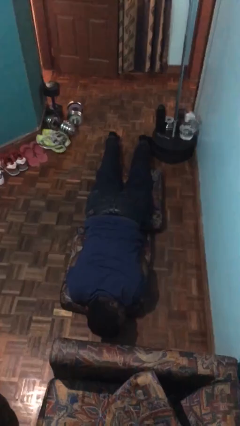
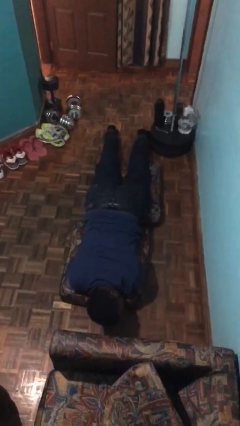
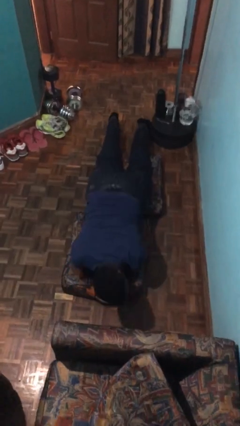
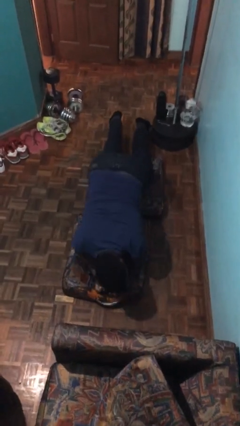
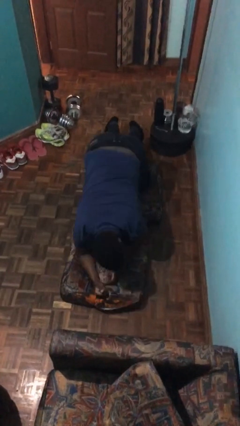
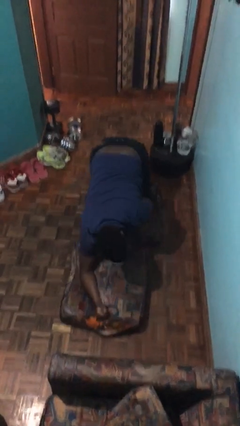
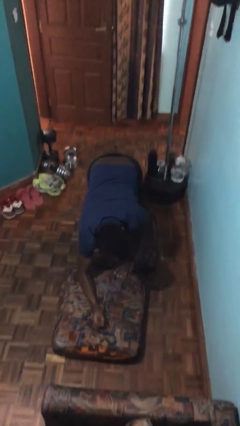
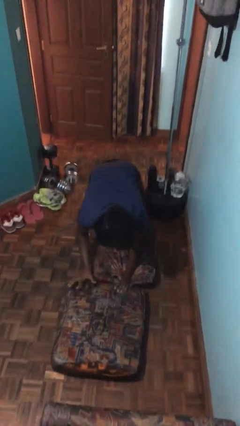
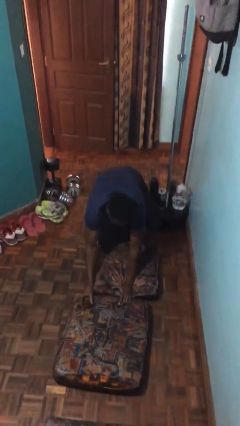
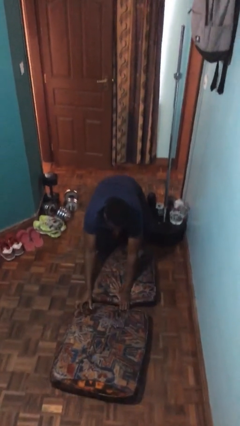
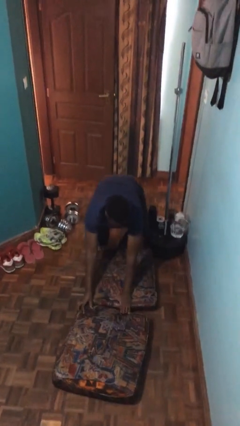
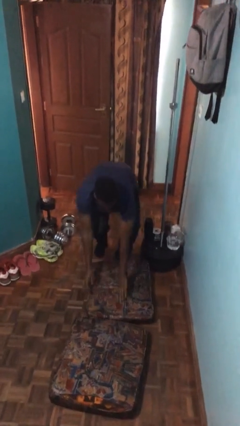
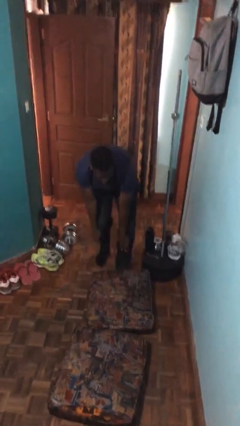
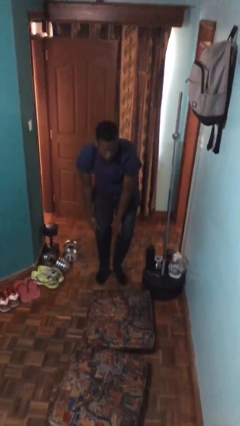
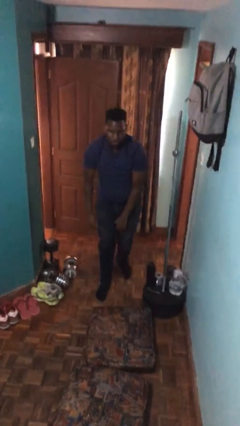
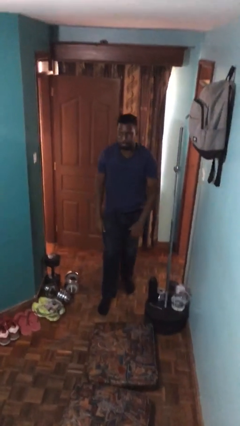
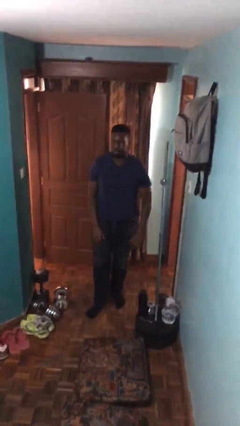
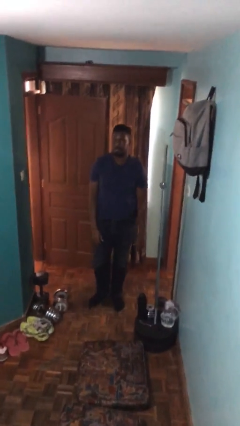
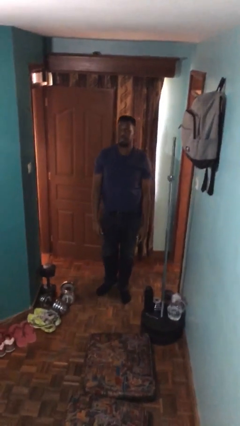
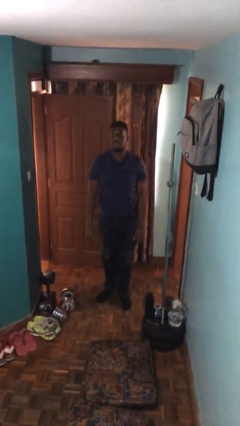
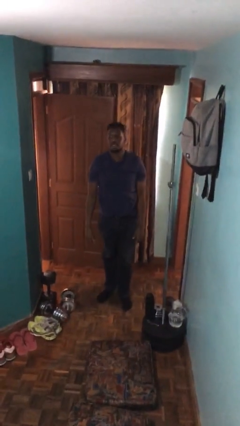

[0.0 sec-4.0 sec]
person stands up from floor

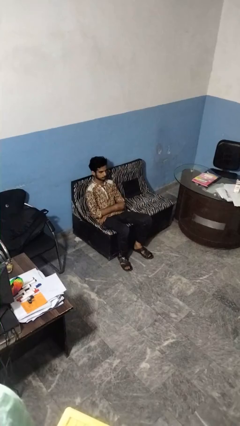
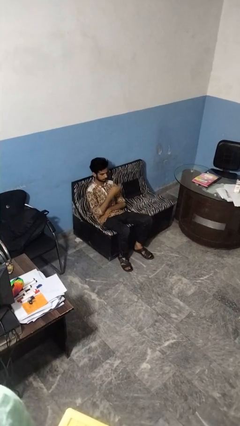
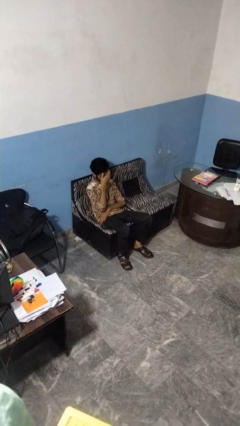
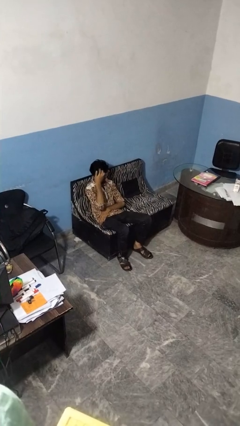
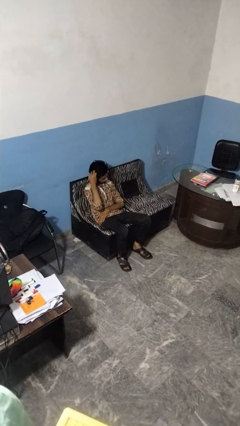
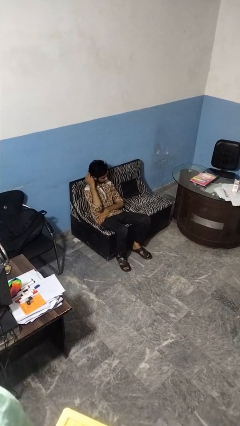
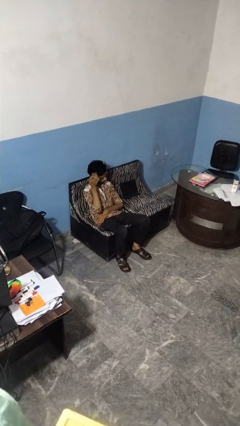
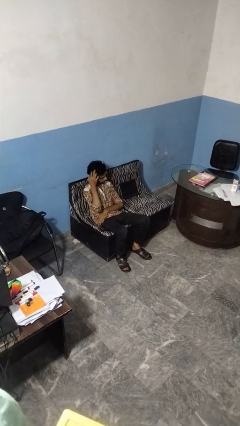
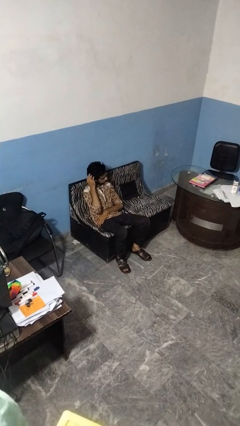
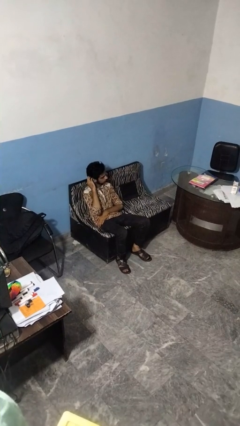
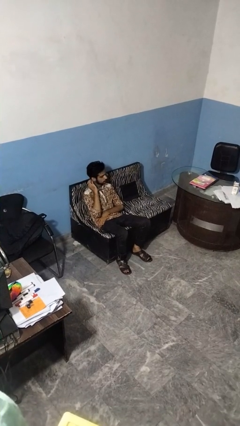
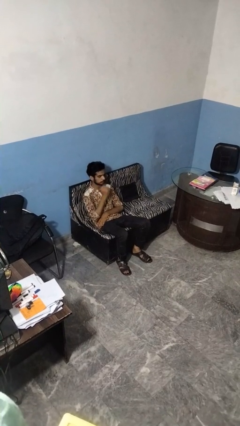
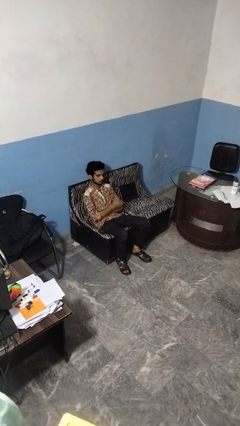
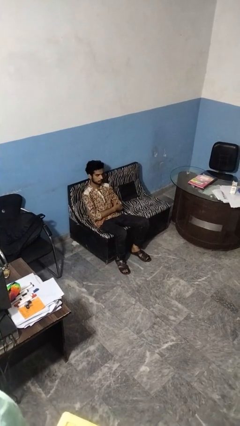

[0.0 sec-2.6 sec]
person strokes hair

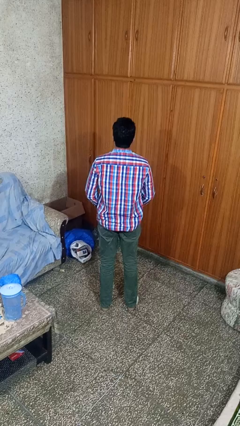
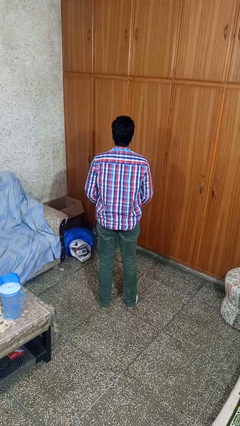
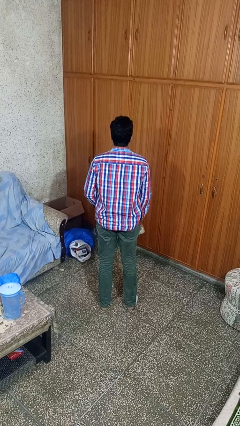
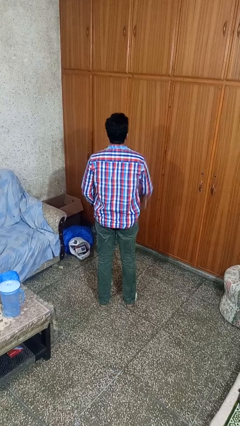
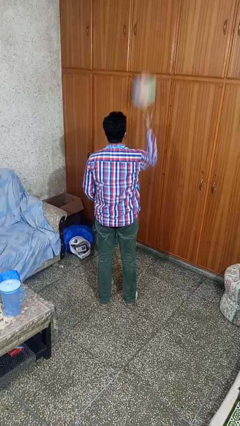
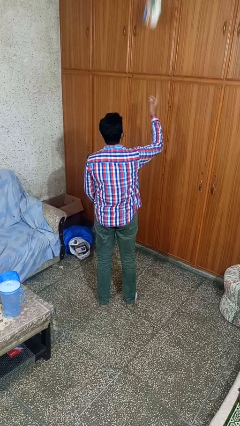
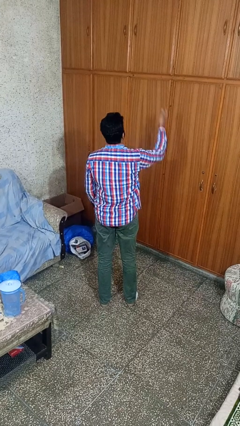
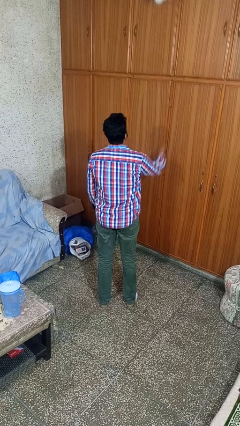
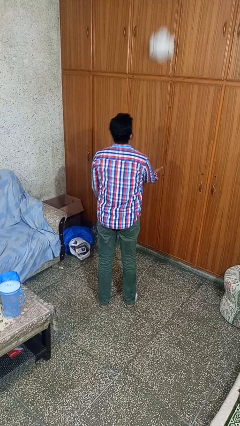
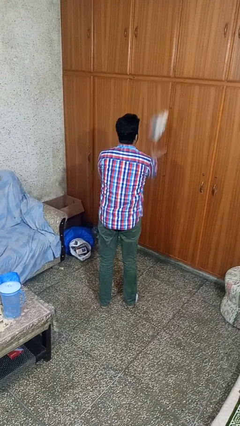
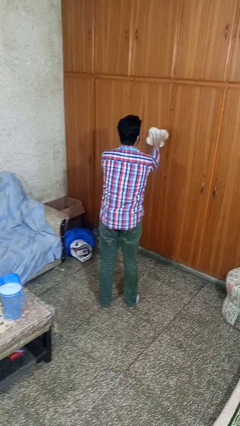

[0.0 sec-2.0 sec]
person drops object

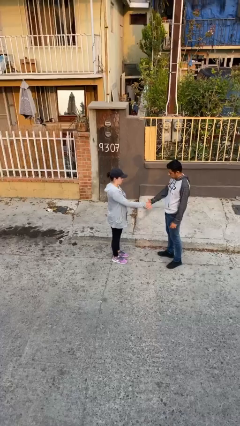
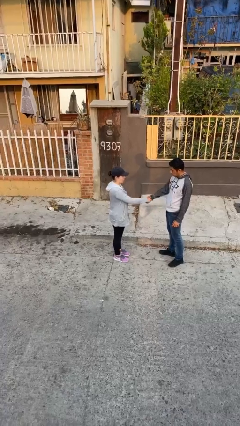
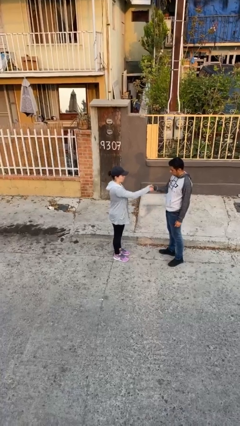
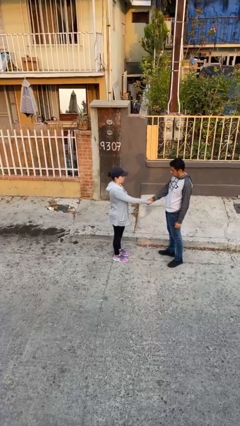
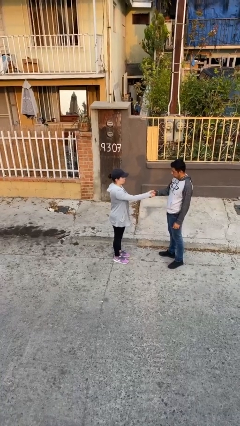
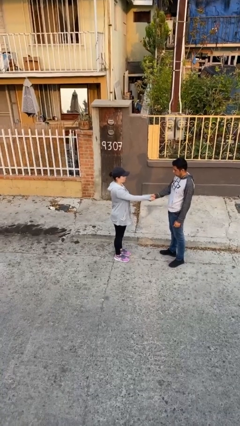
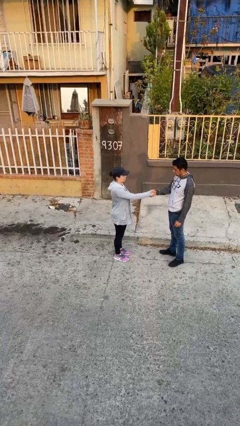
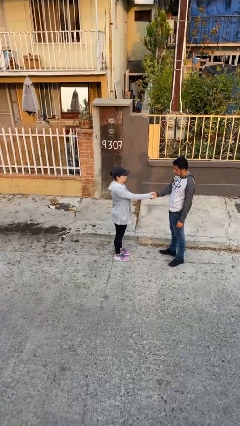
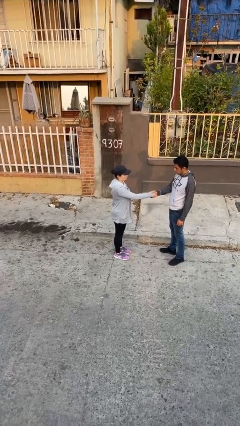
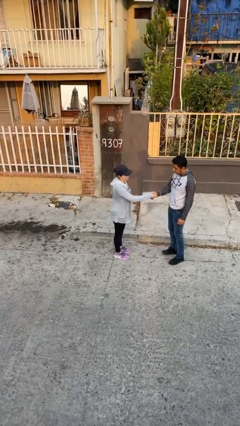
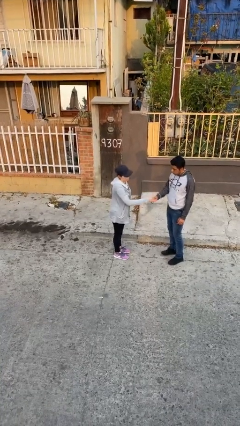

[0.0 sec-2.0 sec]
person shakes hand

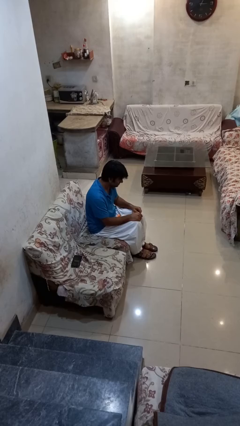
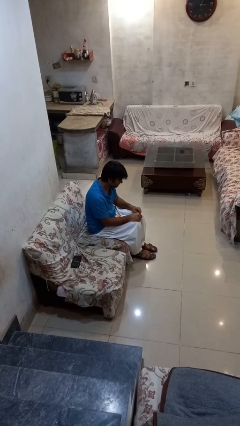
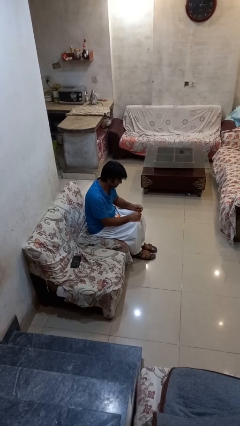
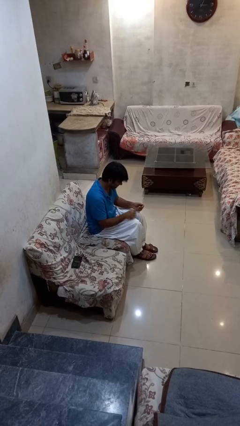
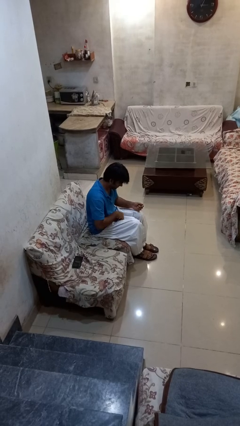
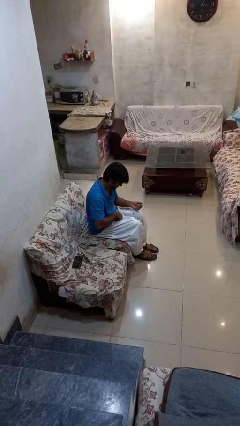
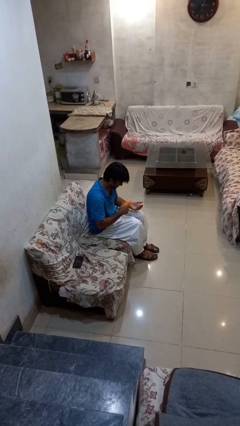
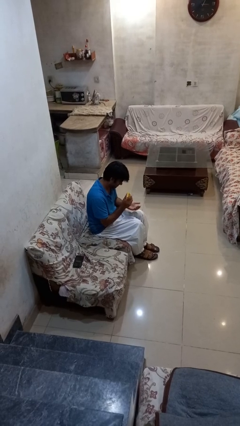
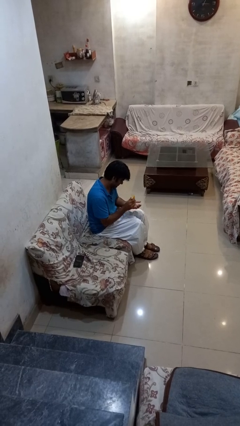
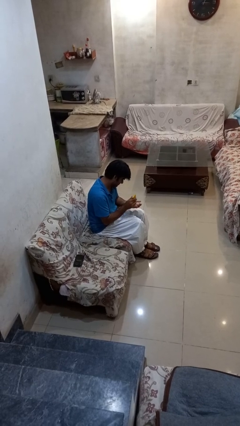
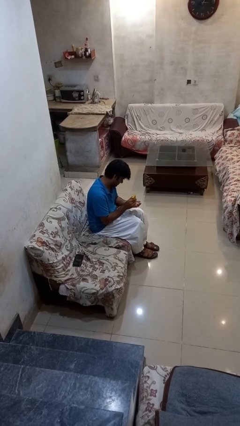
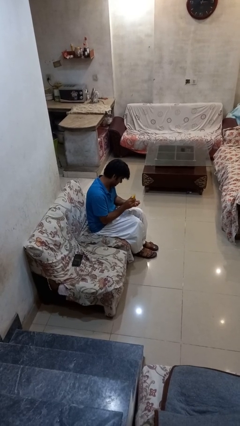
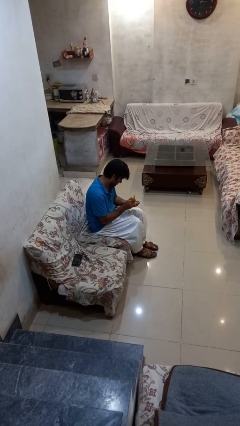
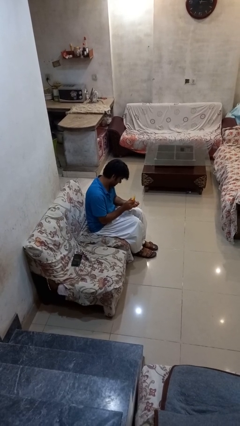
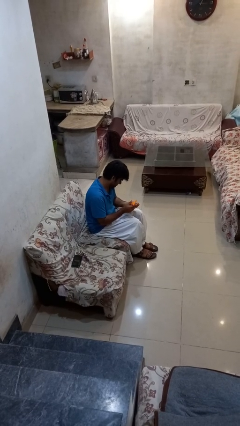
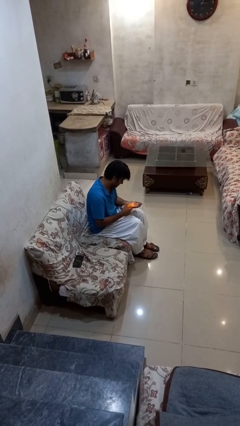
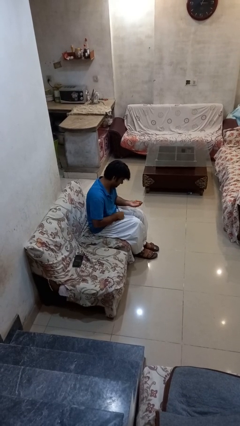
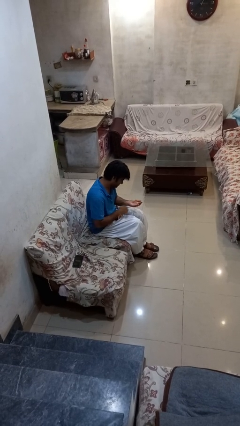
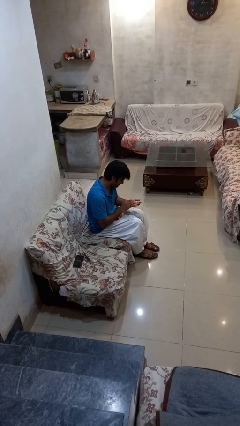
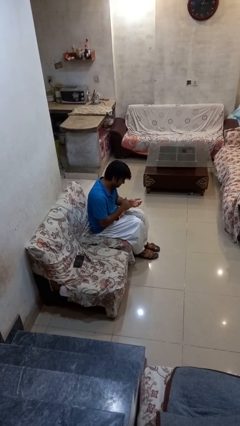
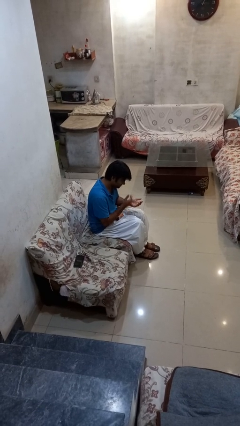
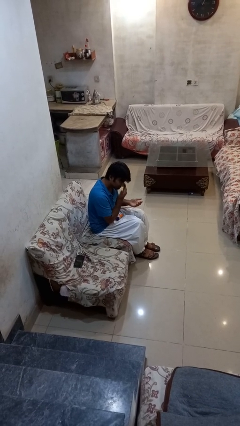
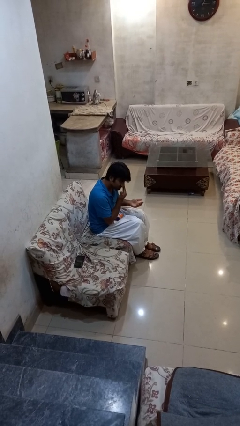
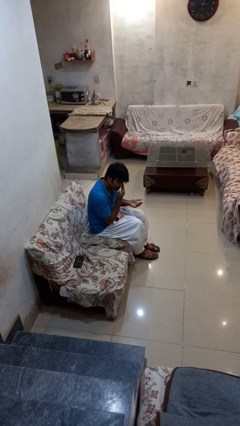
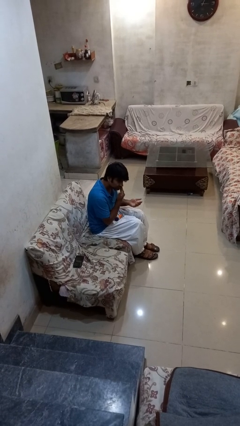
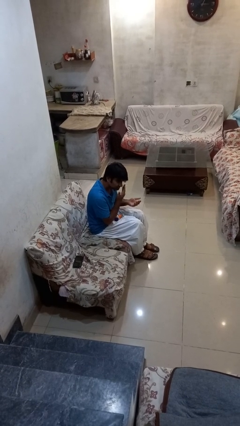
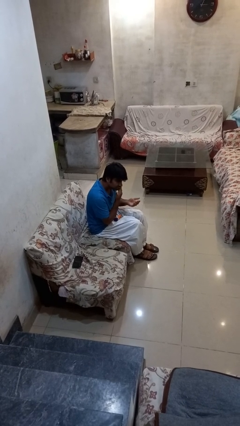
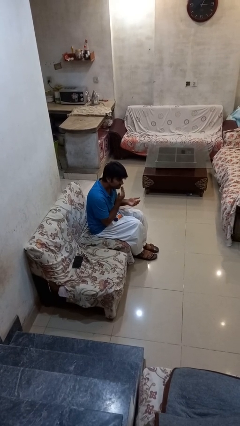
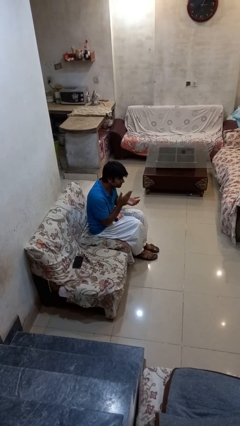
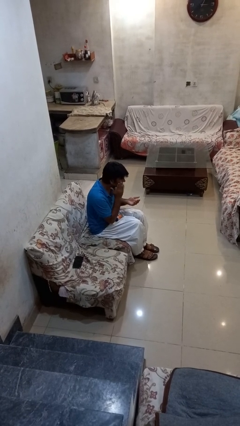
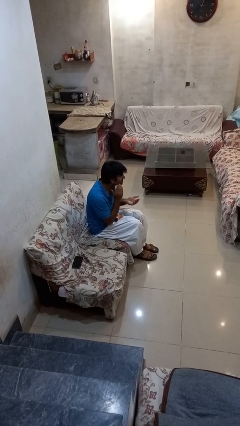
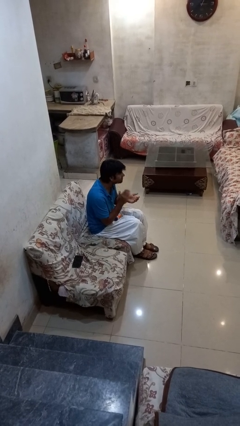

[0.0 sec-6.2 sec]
person applies facial moisturizer

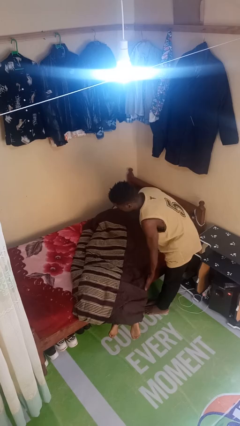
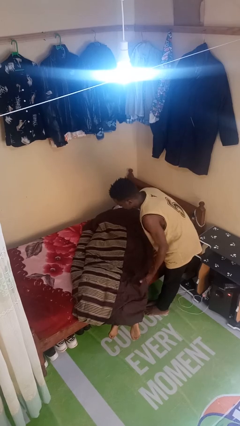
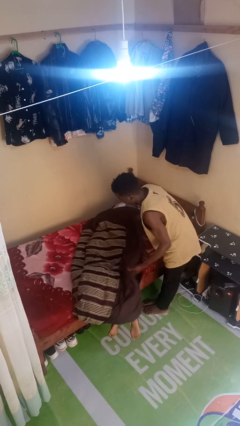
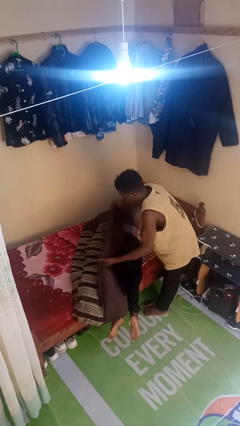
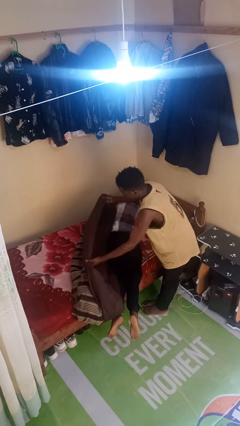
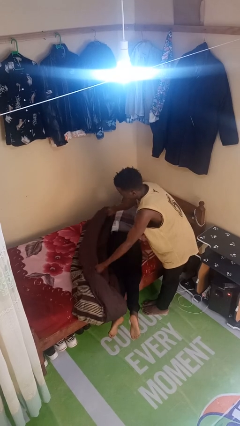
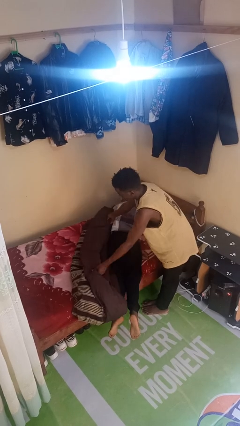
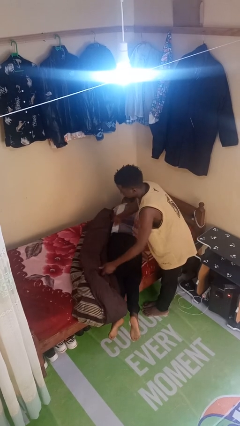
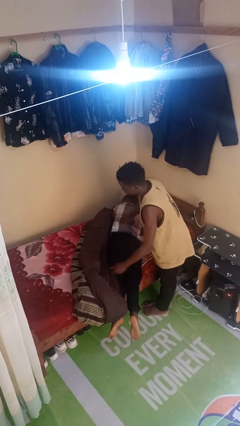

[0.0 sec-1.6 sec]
person uncovers friend with blanket
